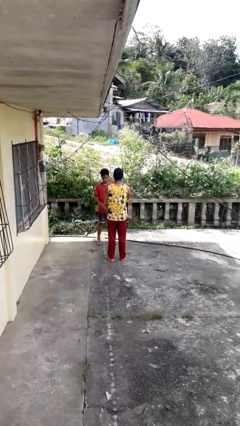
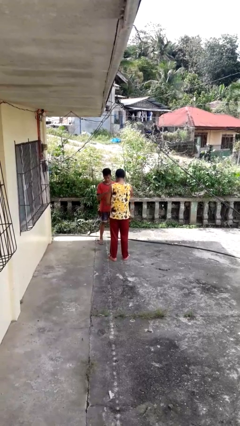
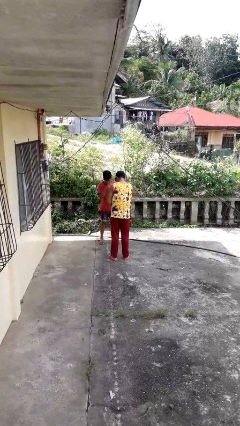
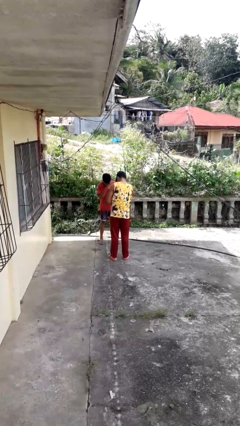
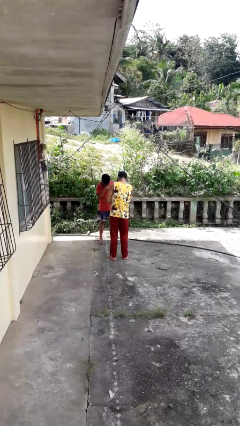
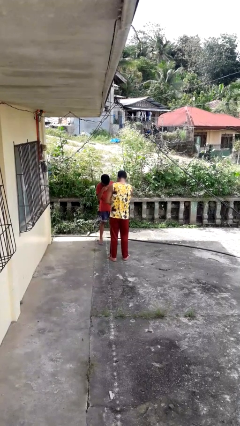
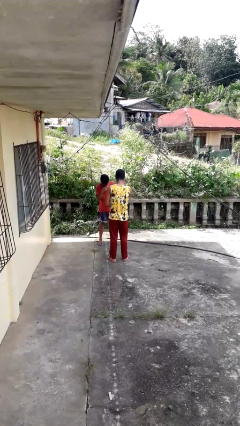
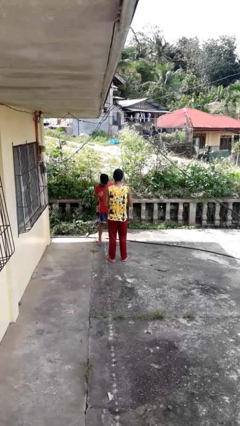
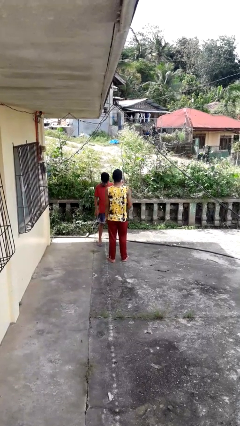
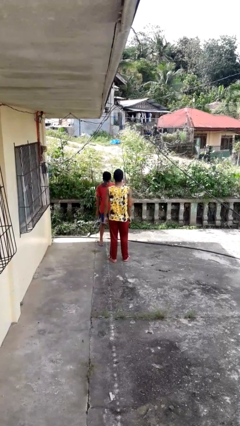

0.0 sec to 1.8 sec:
person laughs with person

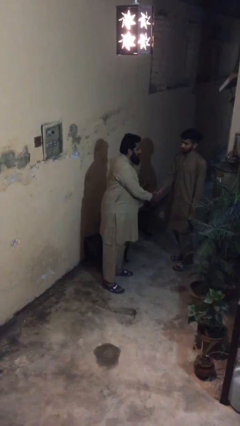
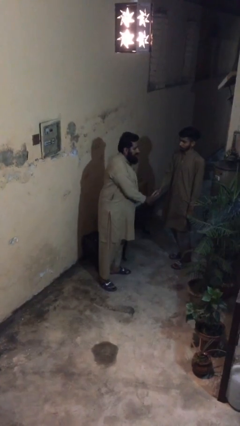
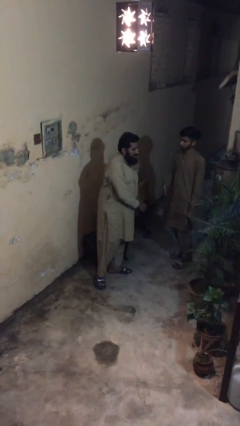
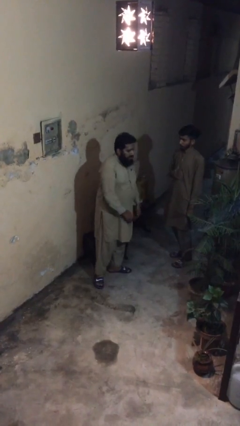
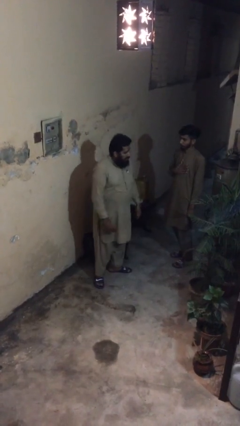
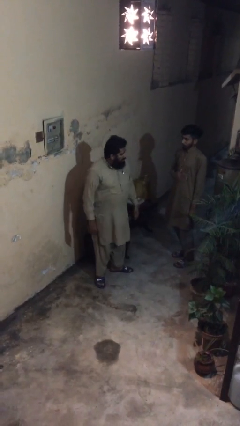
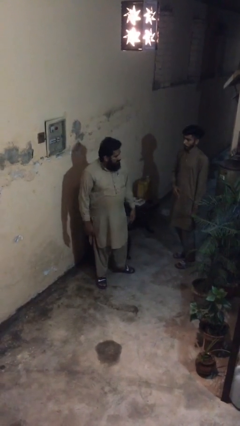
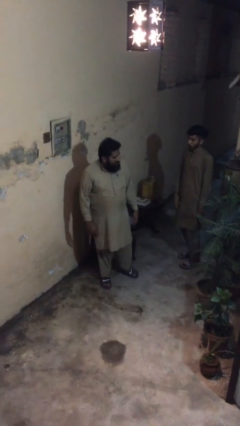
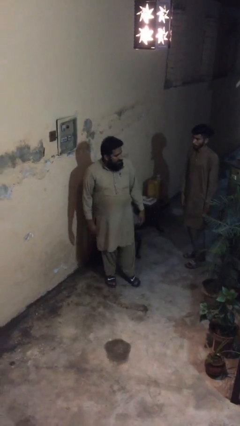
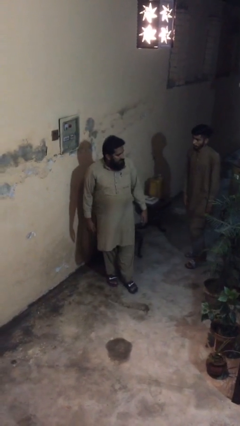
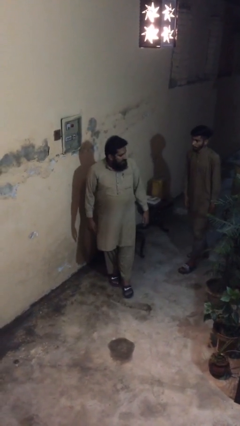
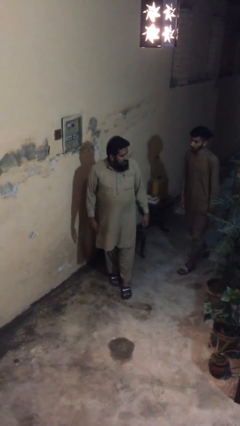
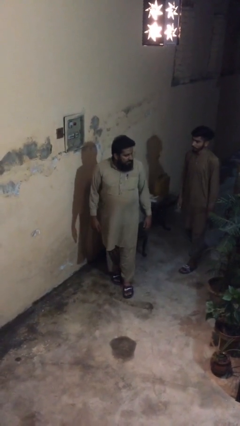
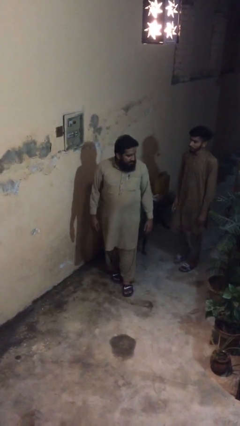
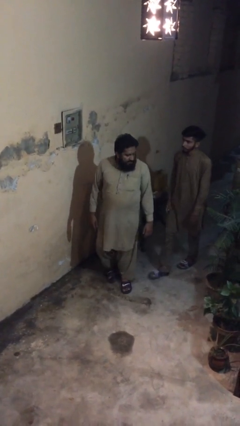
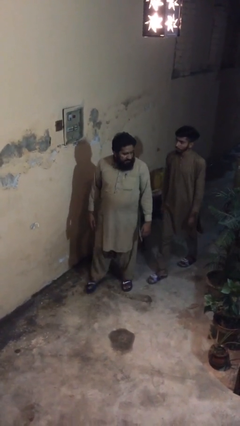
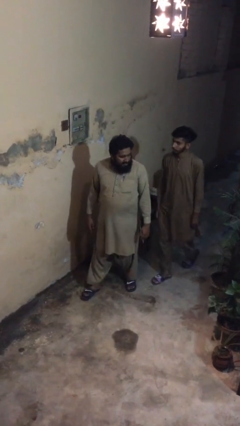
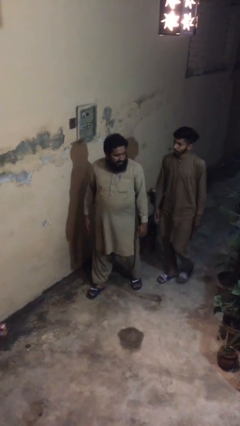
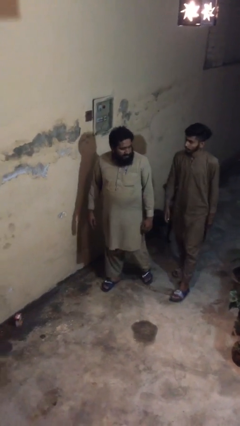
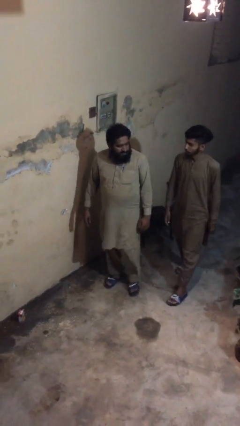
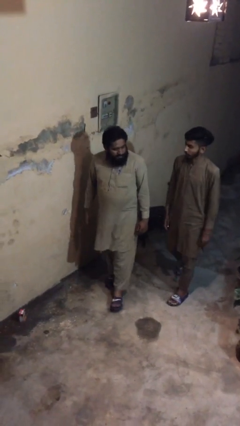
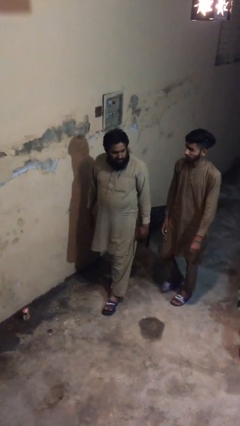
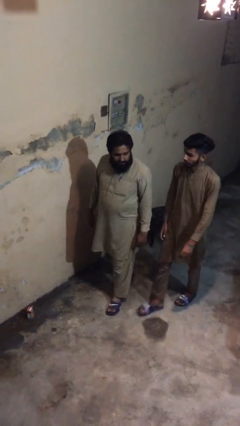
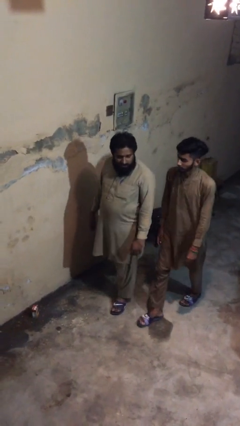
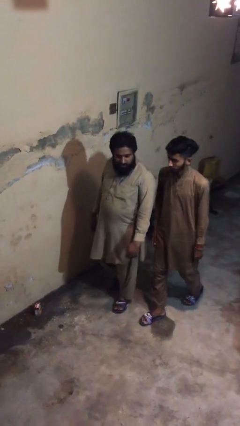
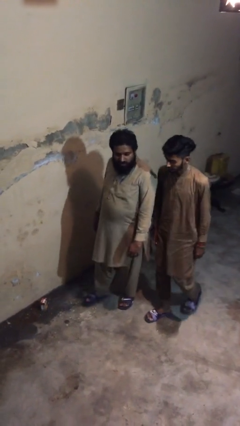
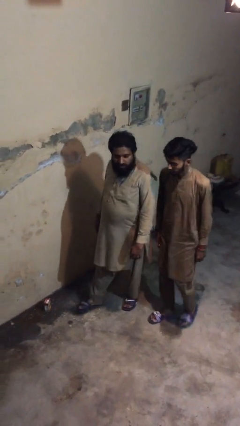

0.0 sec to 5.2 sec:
person talks to person

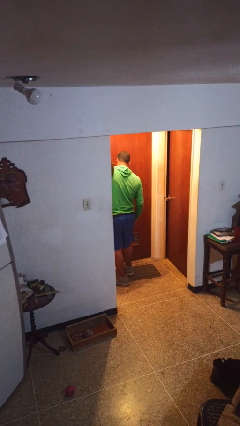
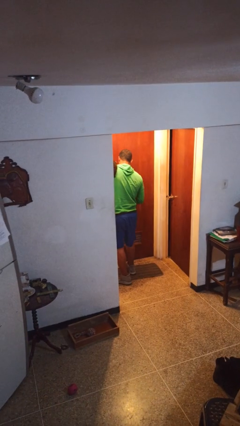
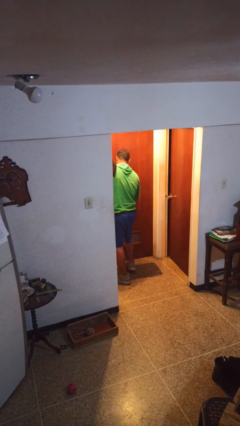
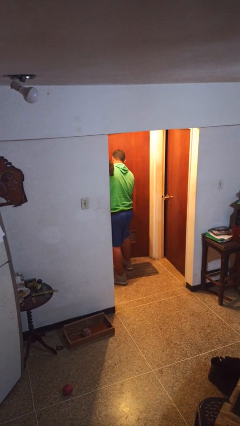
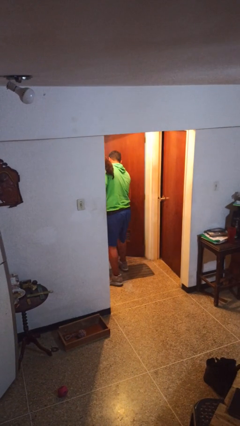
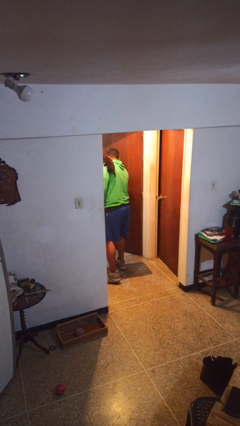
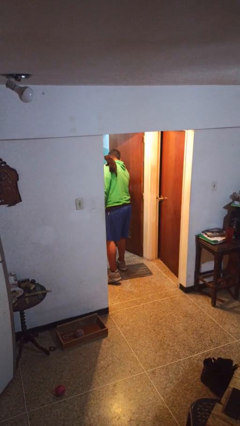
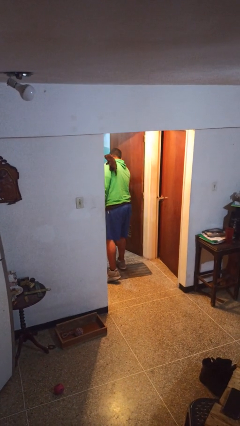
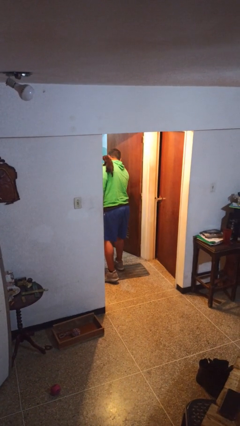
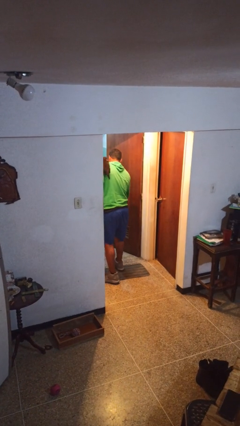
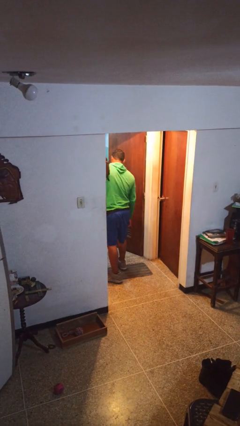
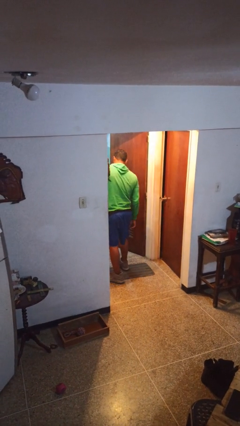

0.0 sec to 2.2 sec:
person opens facility door

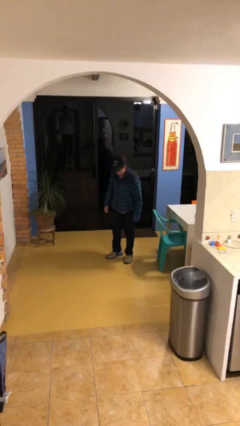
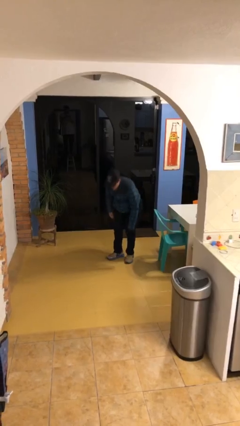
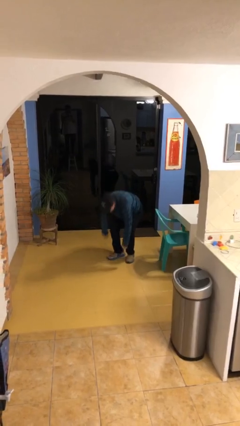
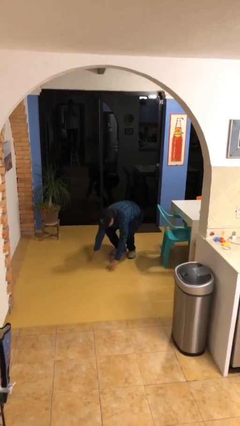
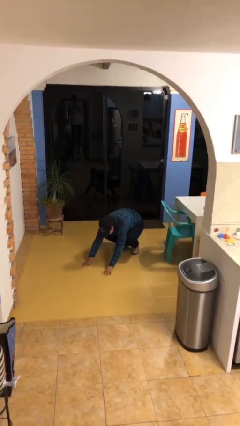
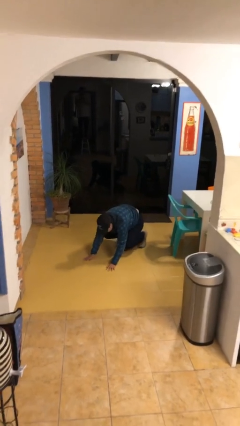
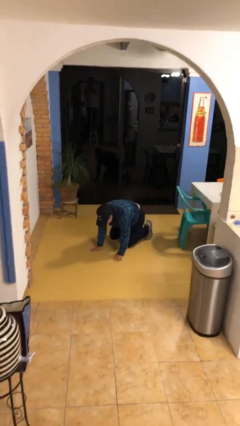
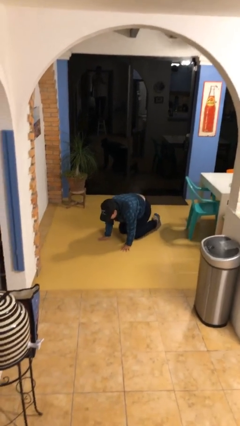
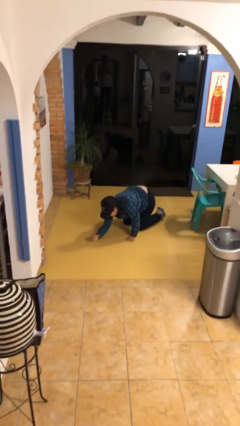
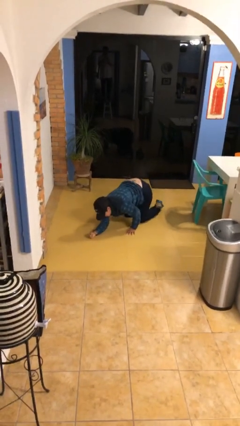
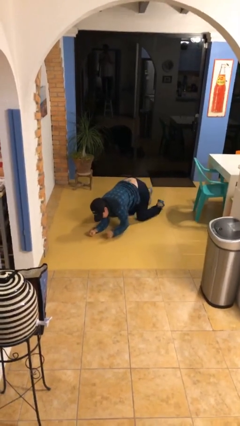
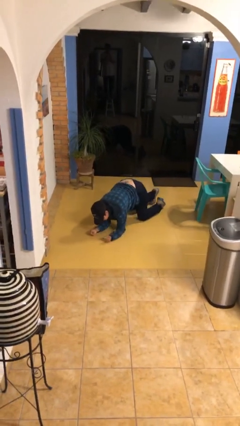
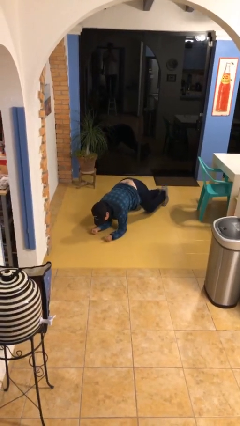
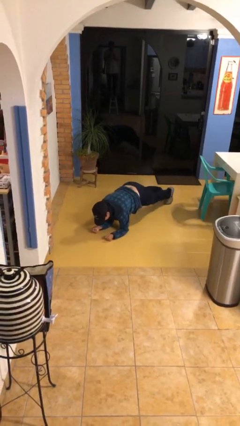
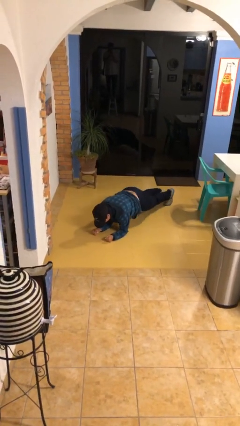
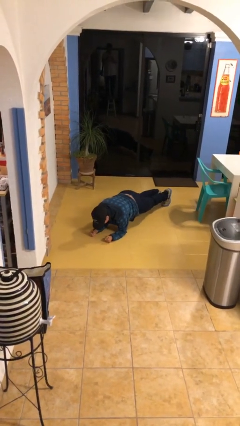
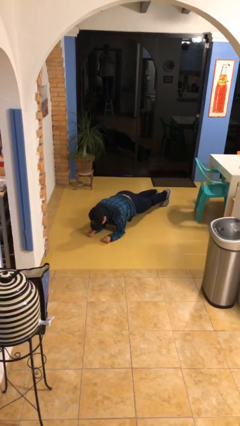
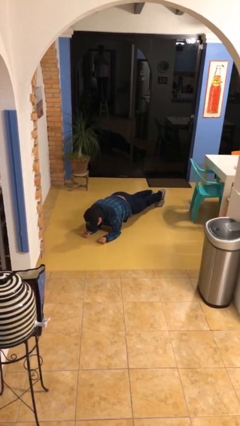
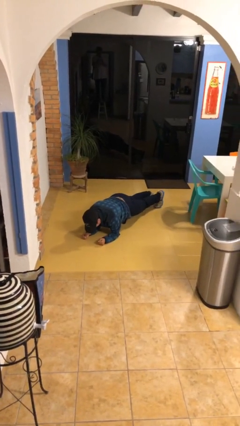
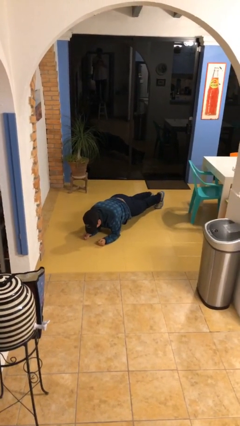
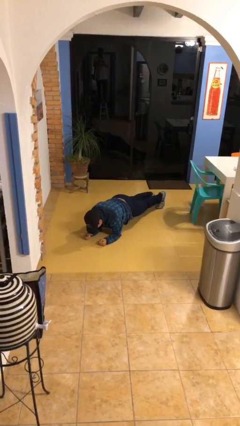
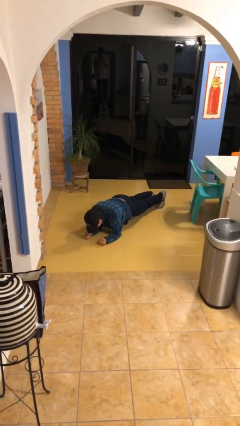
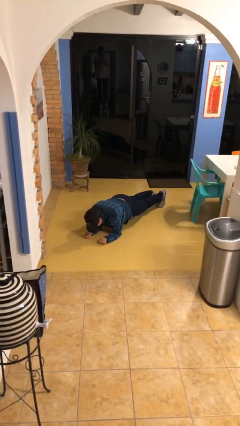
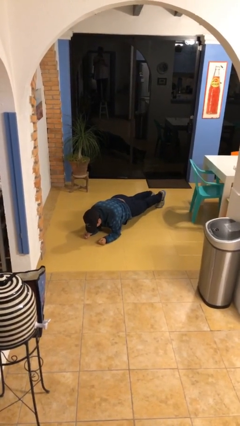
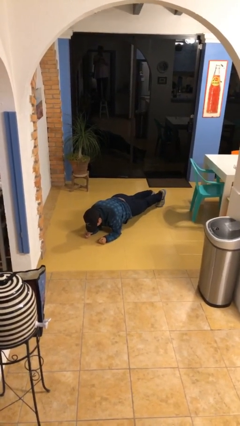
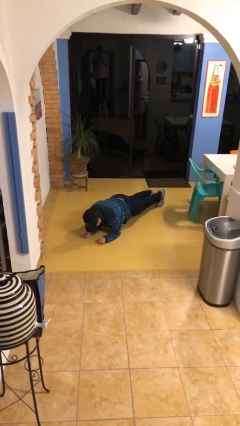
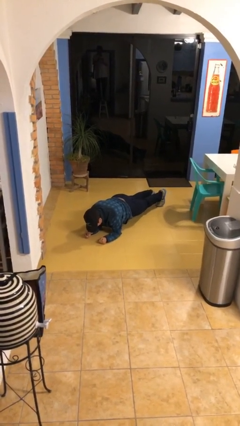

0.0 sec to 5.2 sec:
person exercises with plank

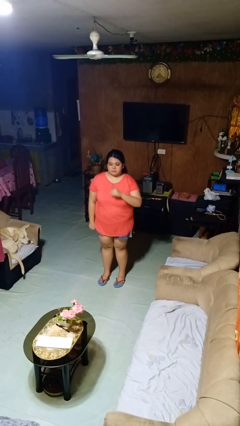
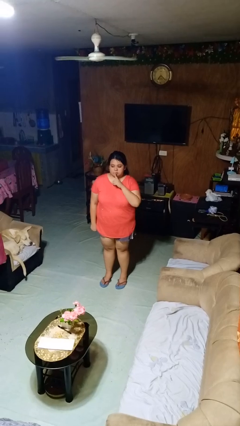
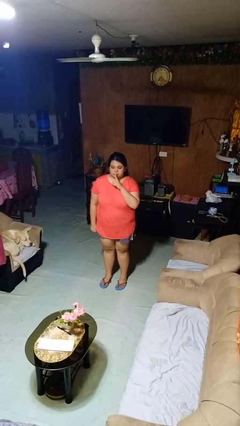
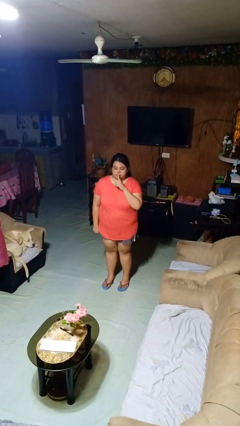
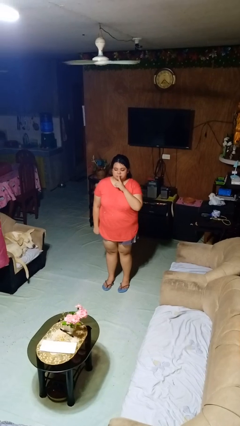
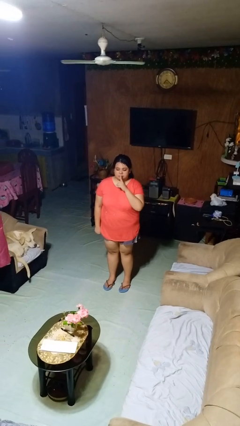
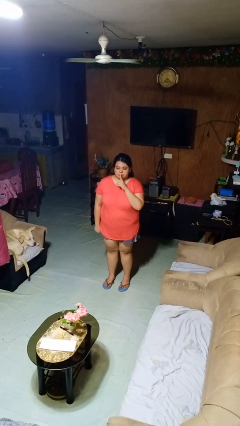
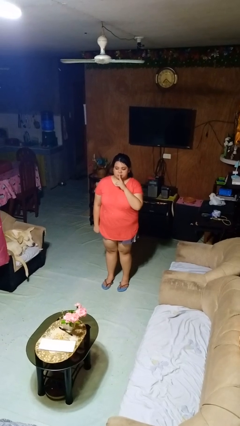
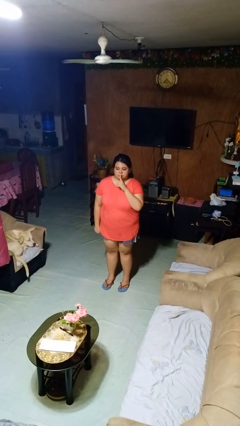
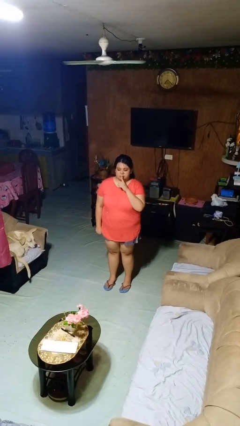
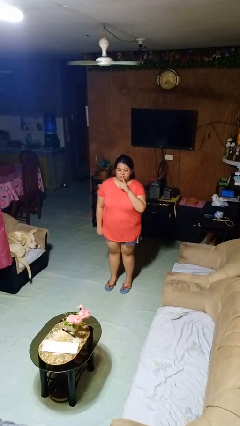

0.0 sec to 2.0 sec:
person gestures be quiet

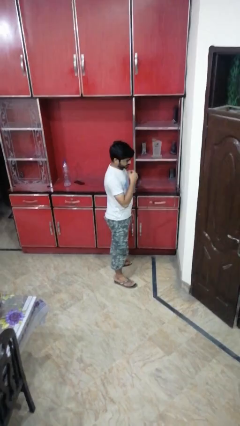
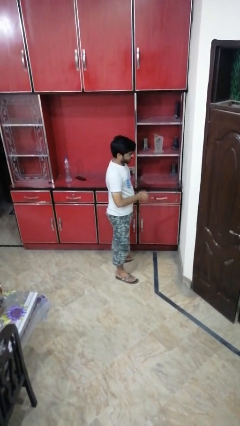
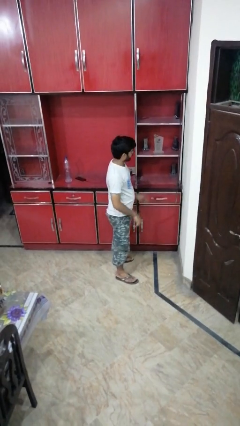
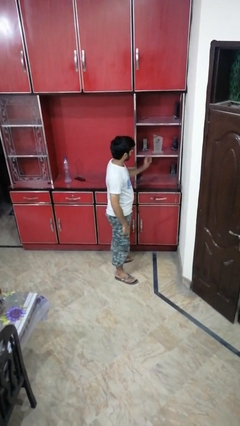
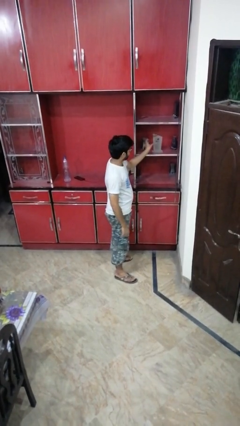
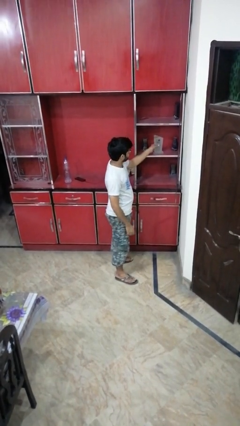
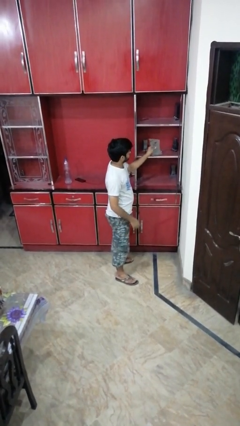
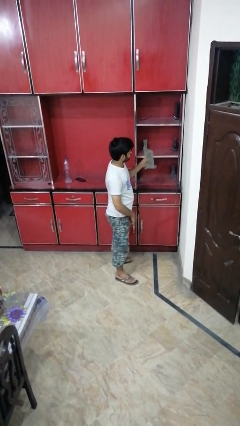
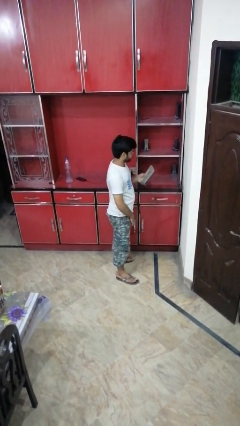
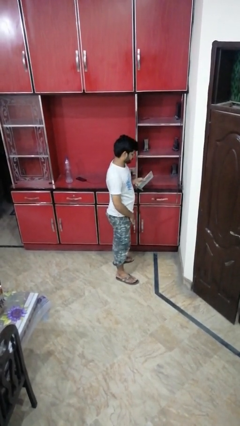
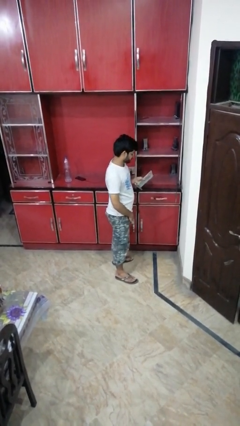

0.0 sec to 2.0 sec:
person picks up object from cabinet
